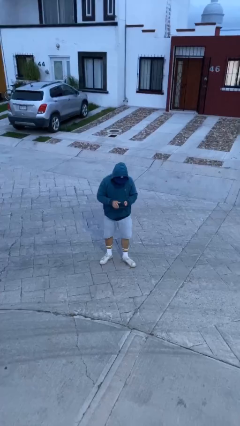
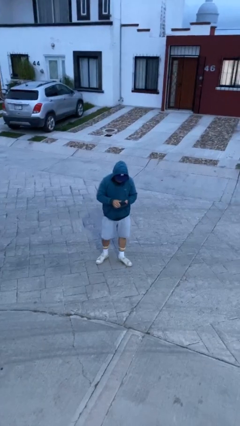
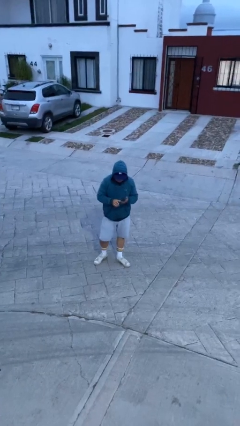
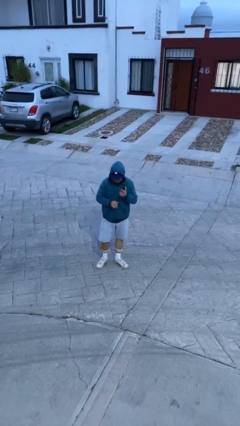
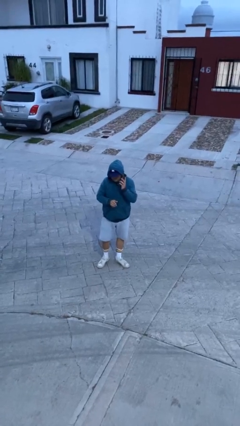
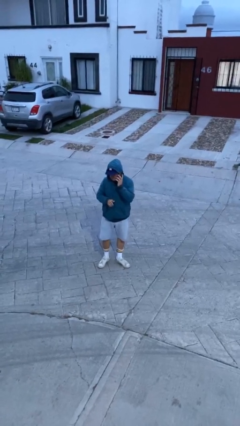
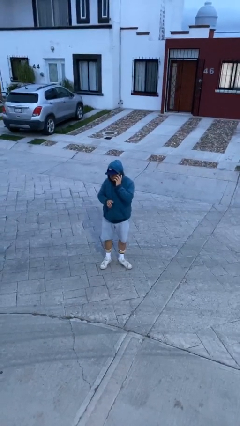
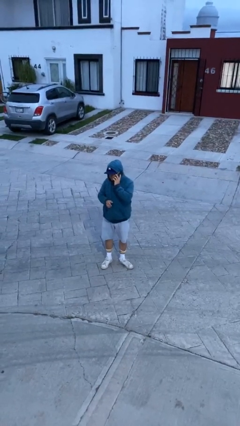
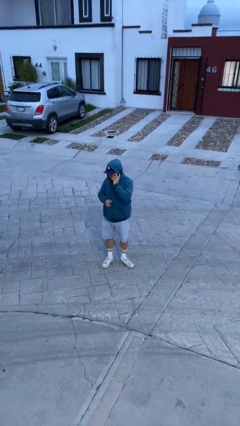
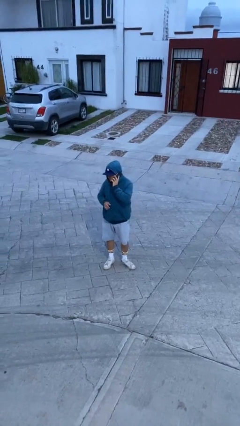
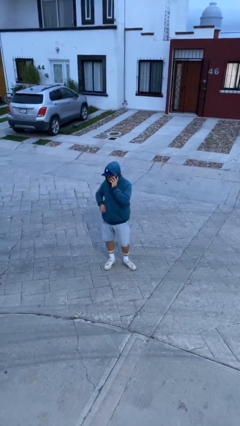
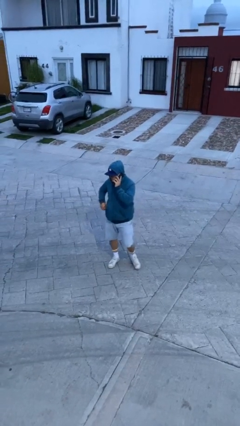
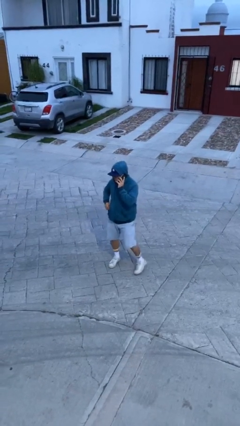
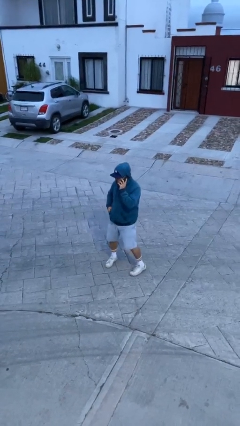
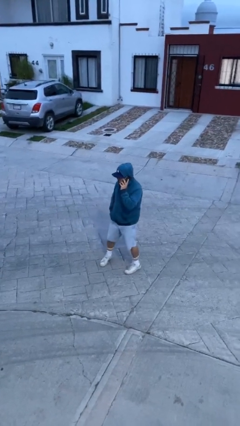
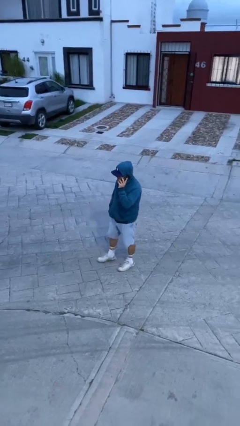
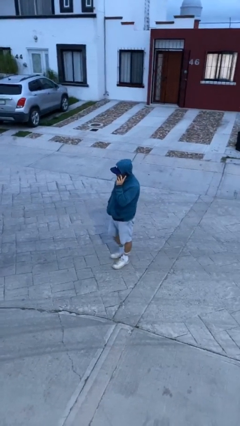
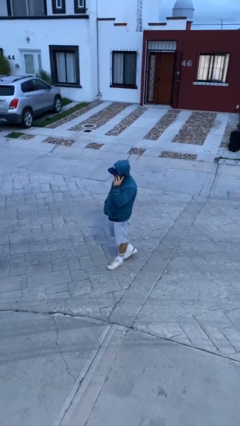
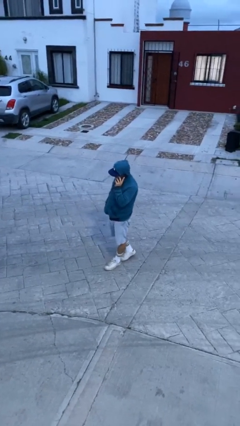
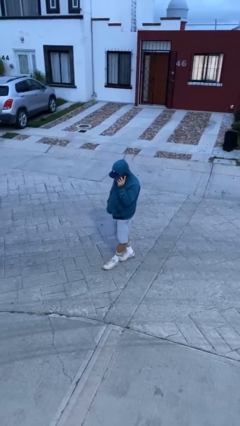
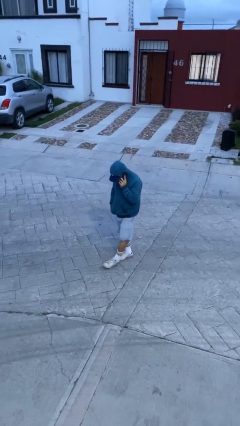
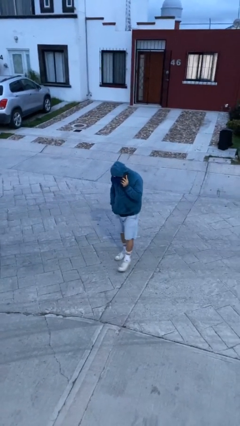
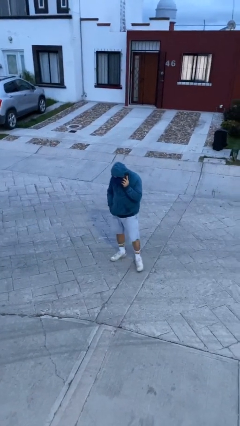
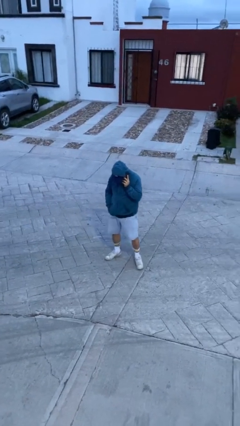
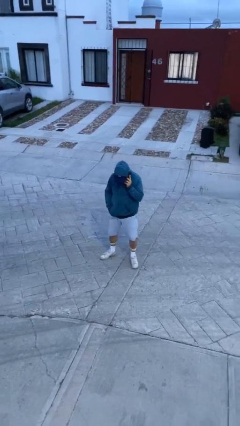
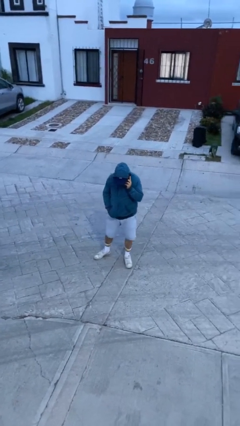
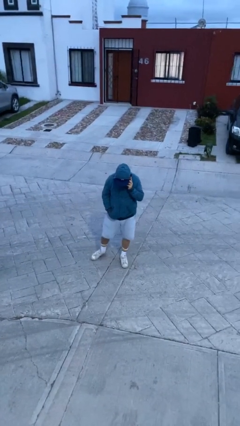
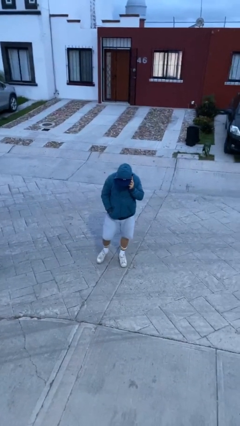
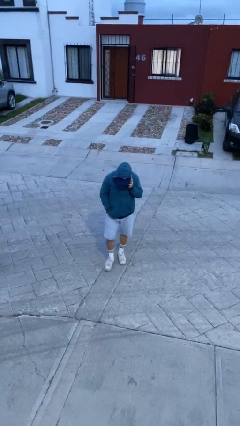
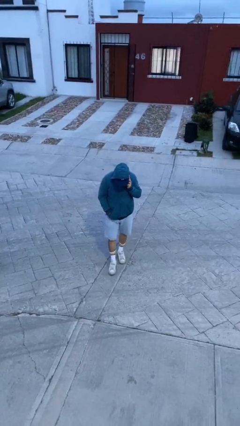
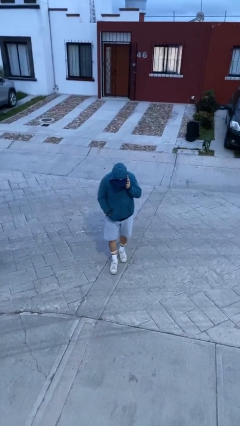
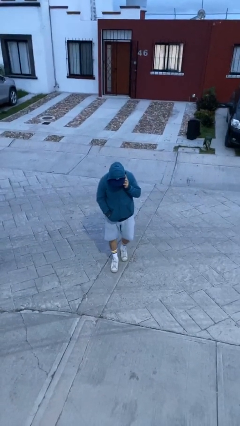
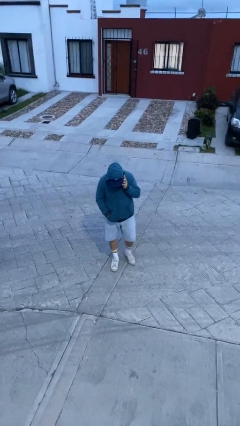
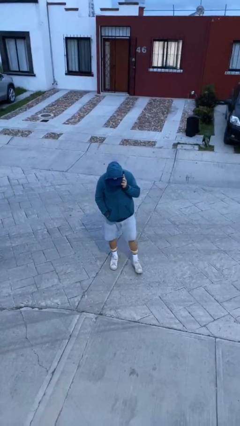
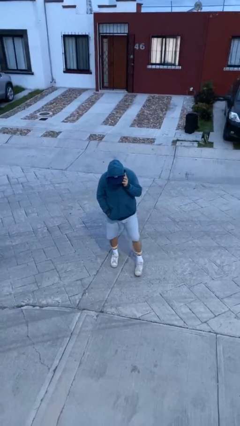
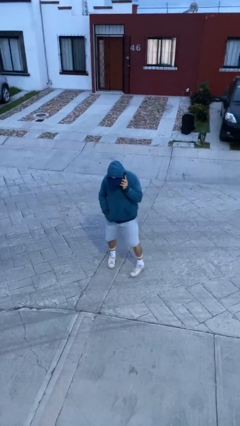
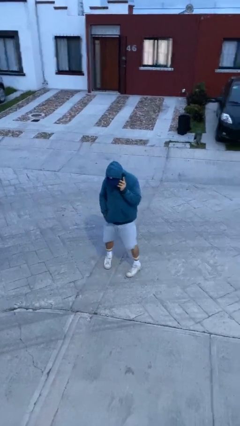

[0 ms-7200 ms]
person talks on phone

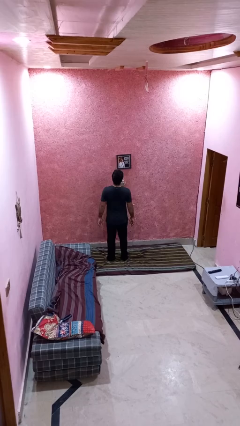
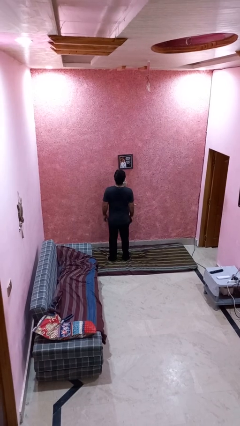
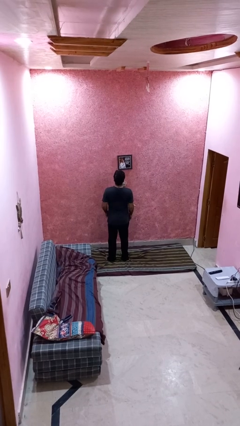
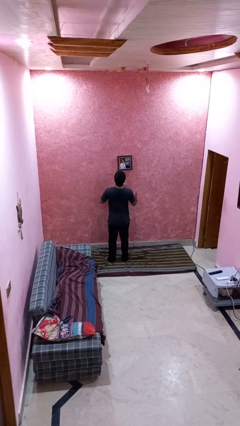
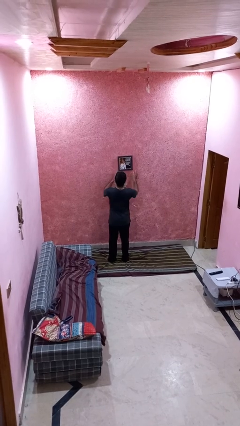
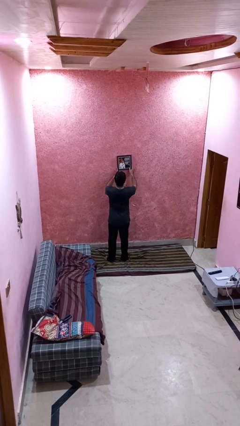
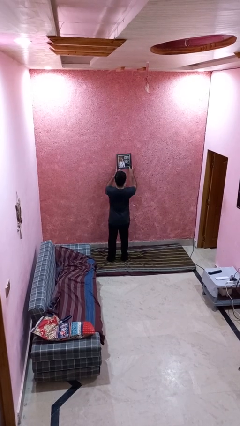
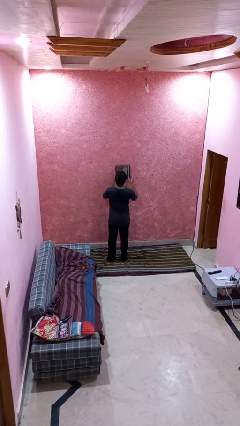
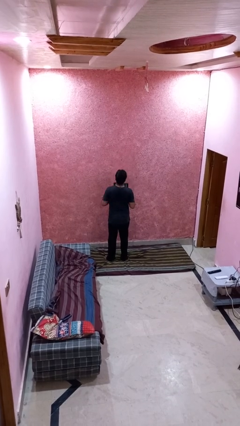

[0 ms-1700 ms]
person takes down picture frame

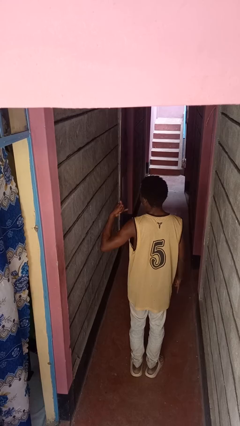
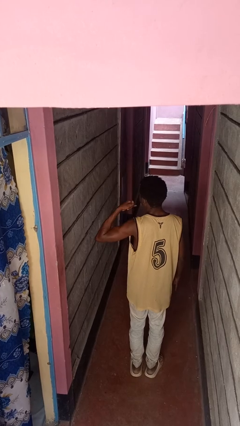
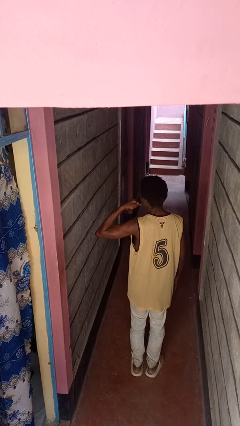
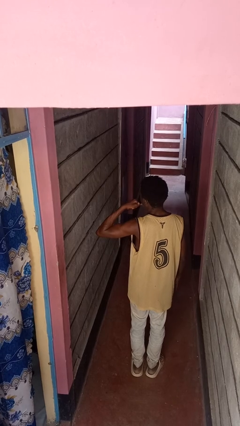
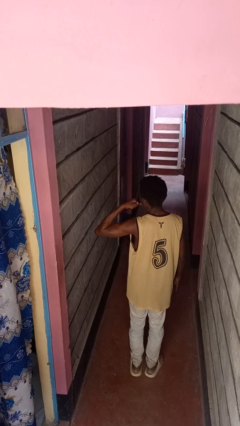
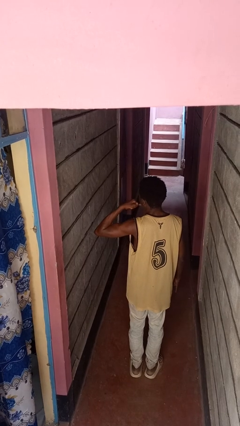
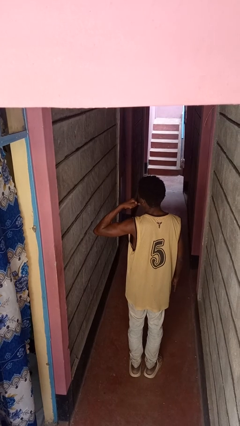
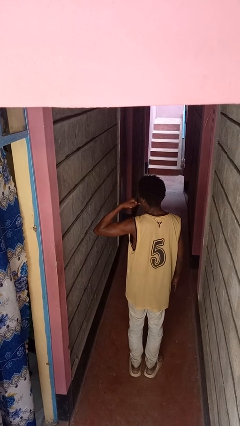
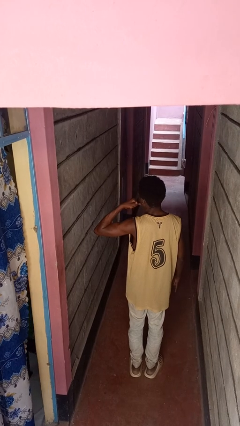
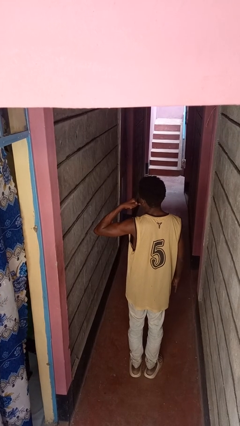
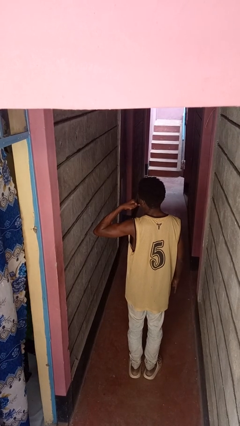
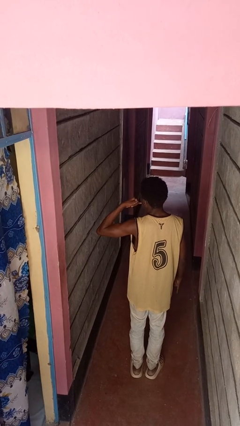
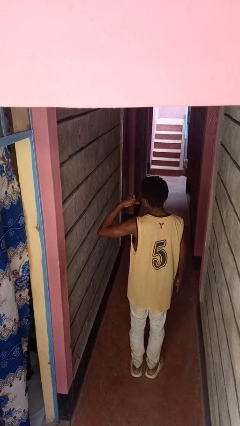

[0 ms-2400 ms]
person gestures call me

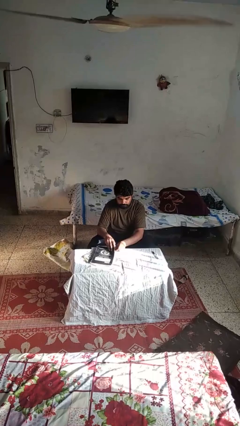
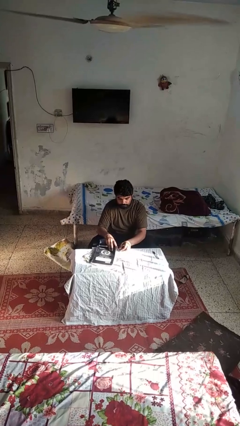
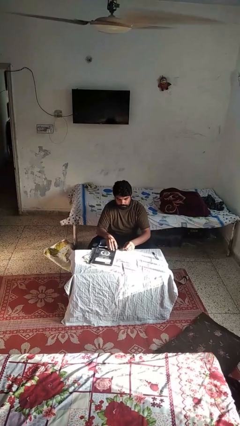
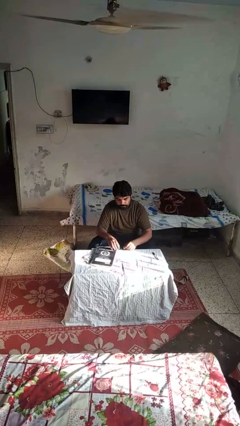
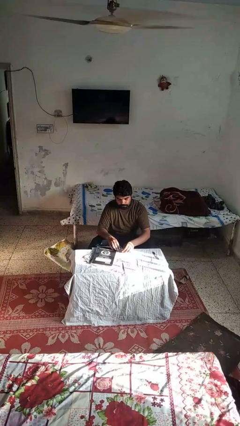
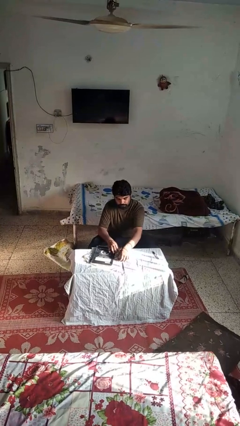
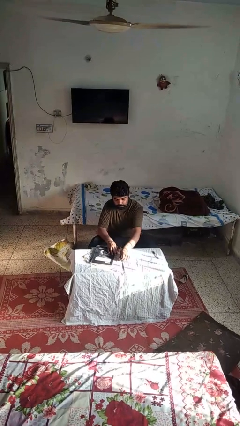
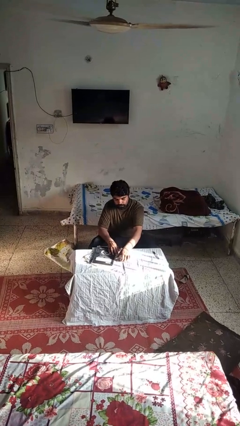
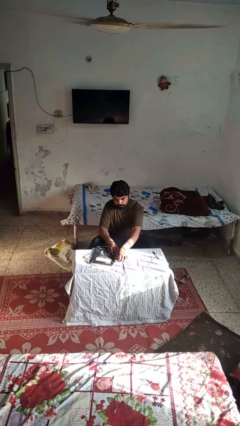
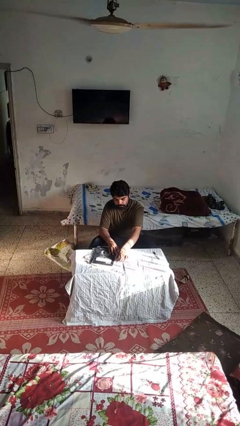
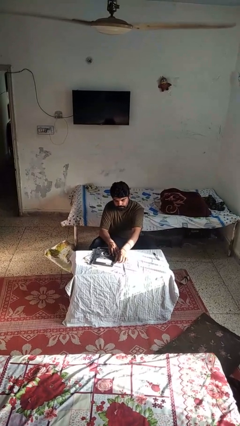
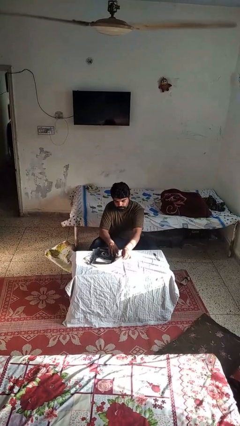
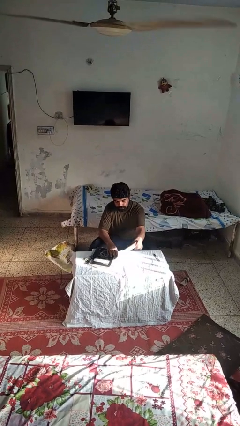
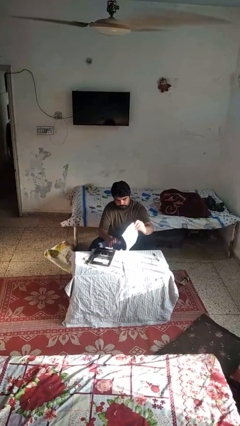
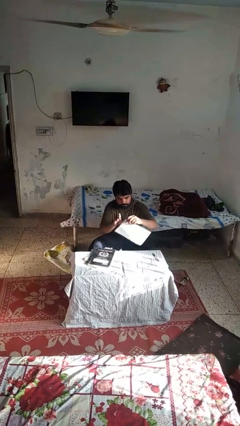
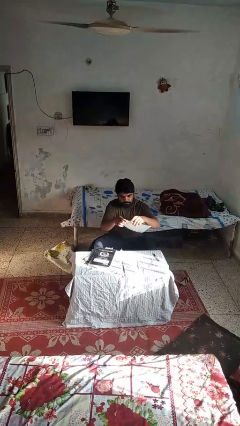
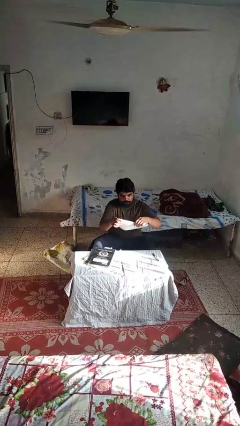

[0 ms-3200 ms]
person tears paper

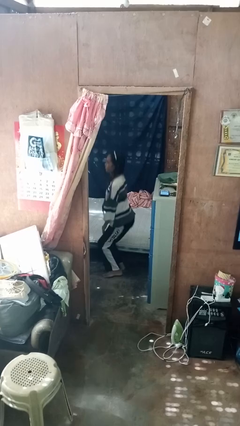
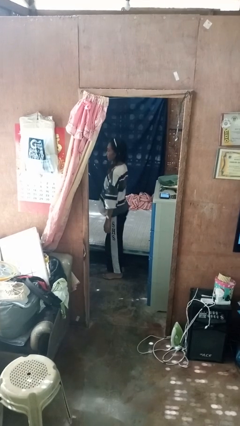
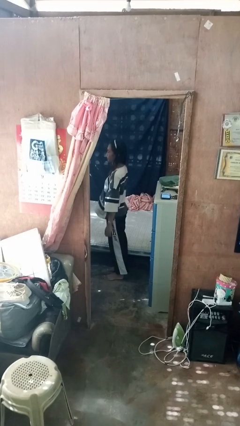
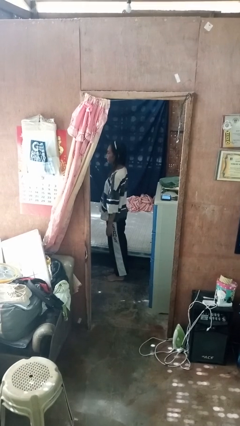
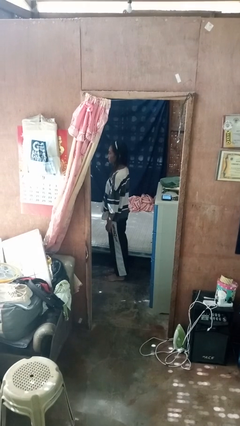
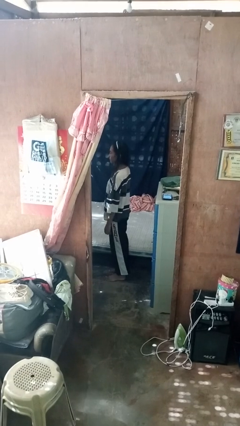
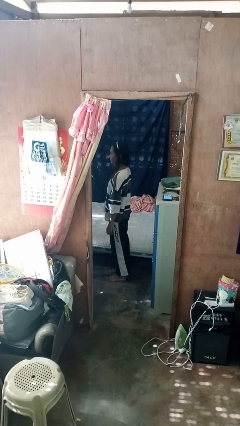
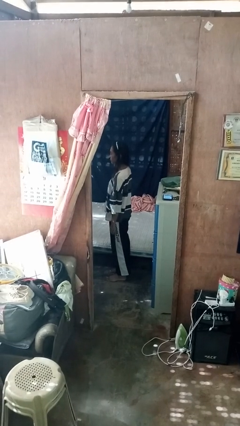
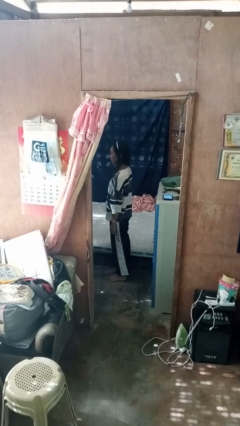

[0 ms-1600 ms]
person stands up

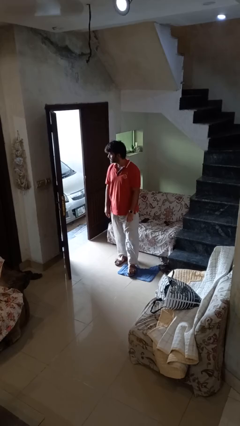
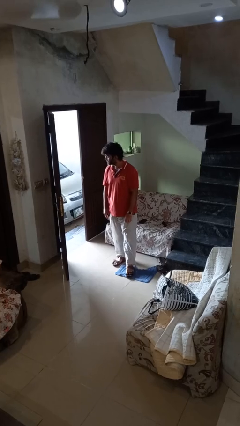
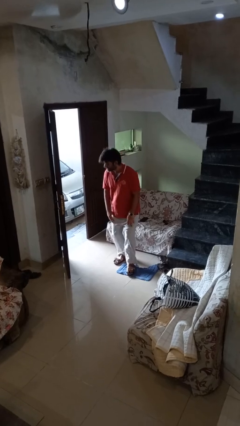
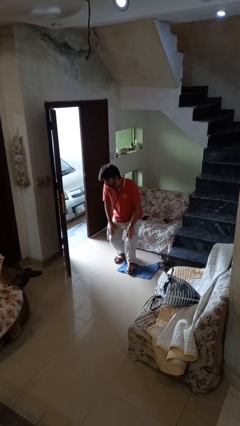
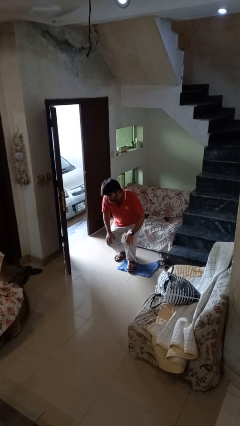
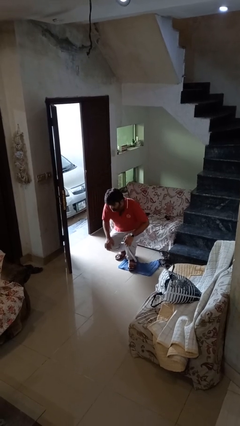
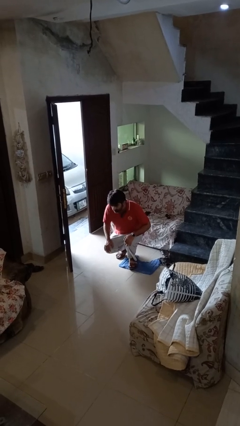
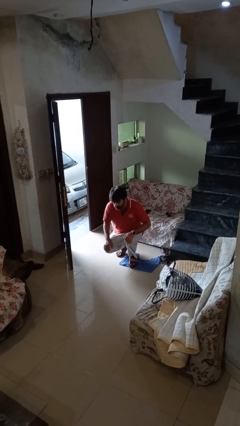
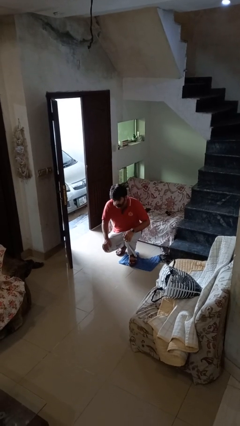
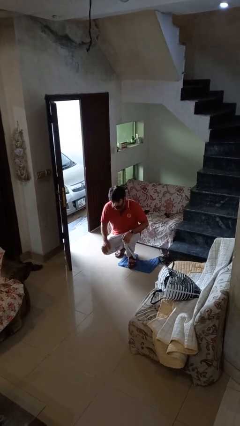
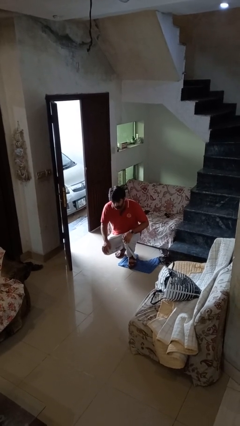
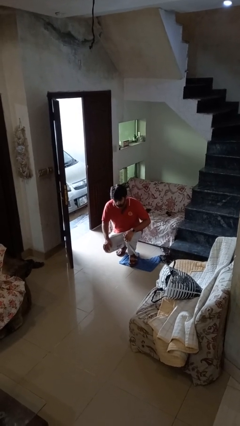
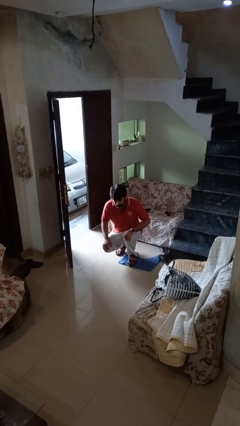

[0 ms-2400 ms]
person squats
